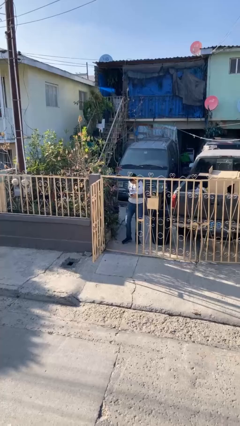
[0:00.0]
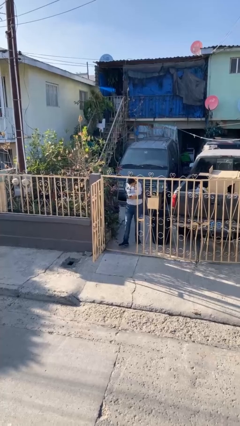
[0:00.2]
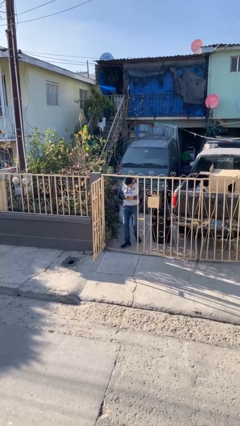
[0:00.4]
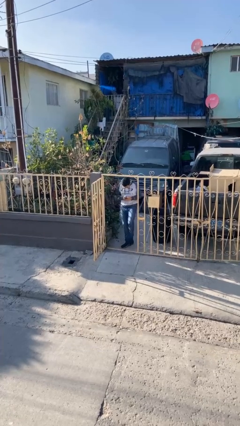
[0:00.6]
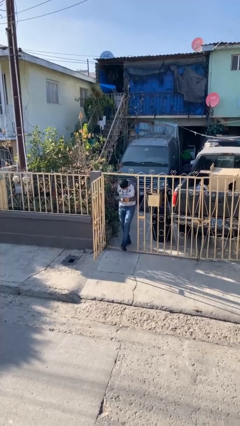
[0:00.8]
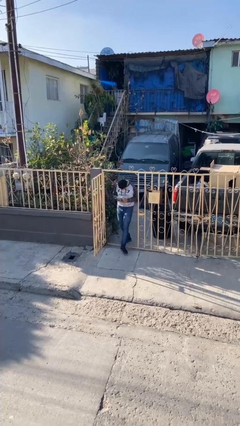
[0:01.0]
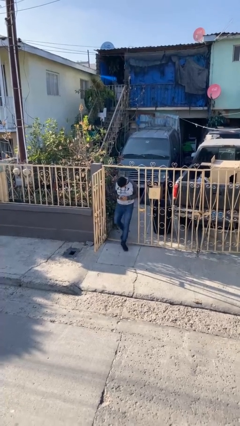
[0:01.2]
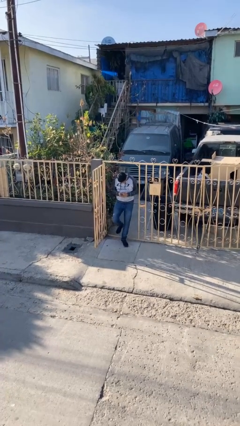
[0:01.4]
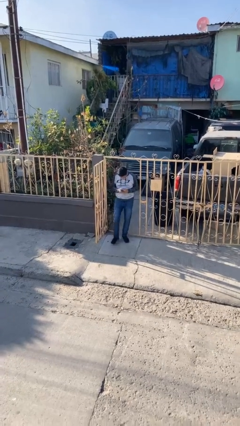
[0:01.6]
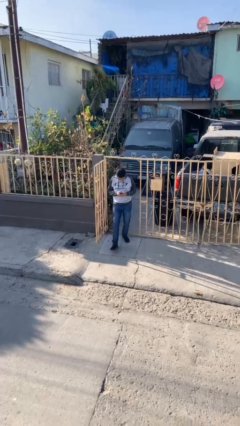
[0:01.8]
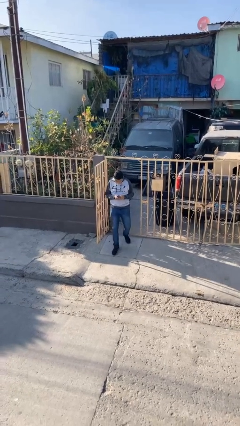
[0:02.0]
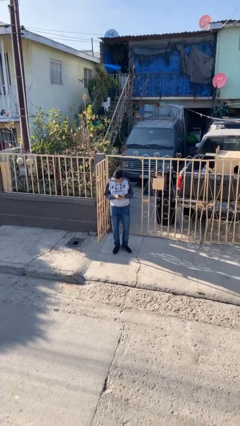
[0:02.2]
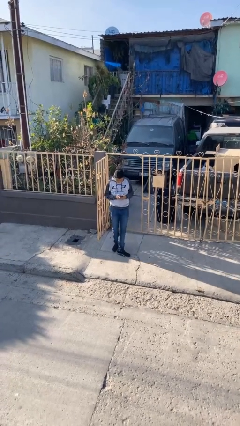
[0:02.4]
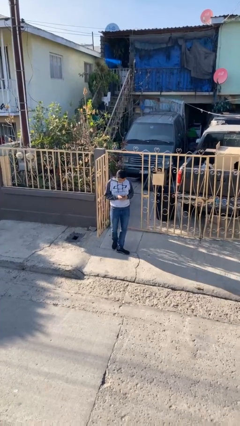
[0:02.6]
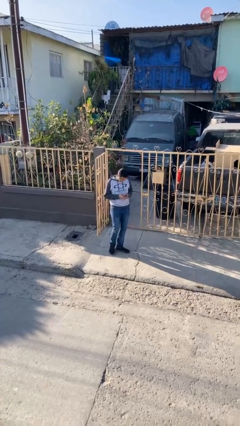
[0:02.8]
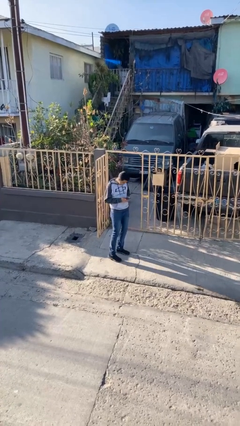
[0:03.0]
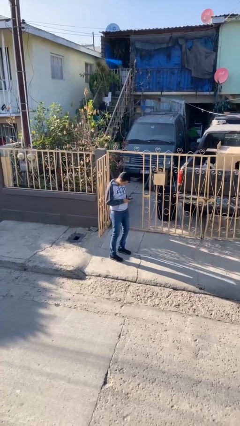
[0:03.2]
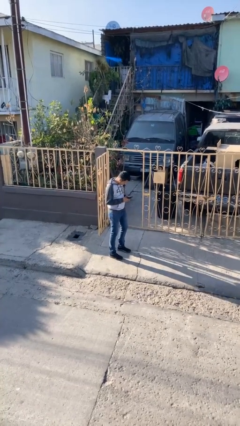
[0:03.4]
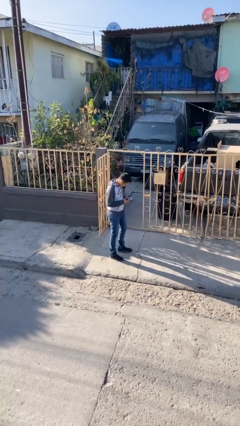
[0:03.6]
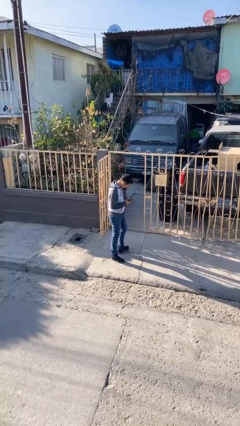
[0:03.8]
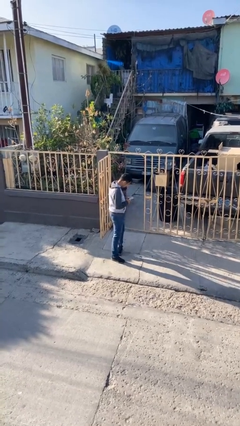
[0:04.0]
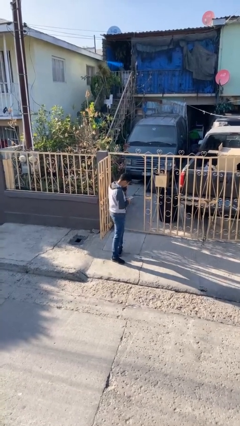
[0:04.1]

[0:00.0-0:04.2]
person enters scene through structure

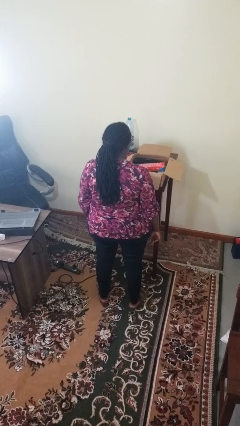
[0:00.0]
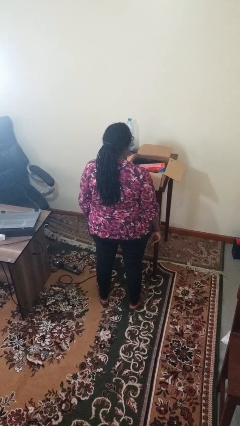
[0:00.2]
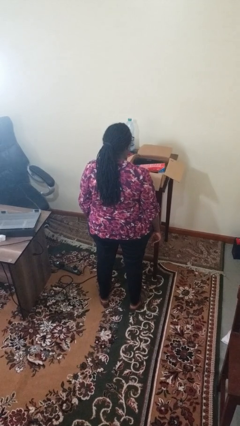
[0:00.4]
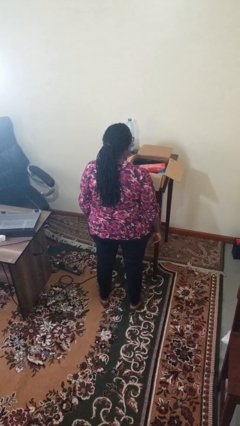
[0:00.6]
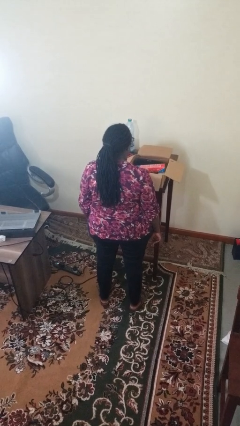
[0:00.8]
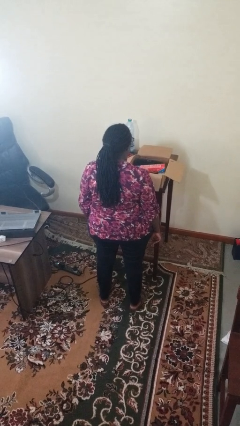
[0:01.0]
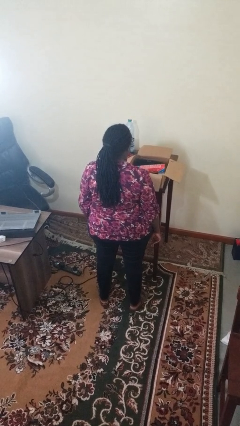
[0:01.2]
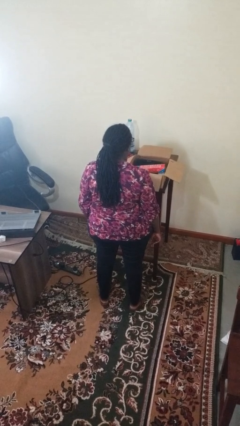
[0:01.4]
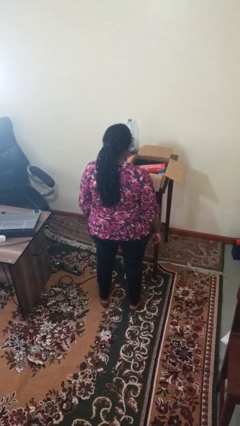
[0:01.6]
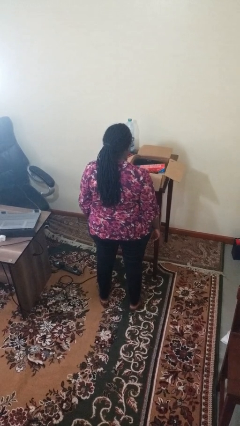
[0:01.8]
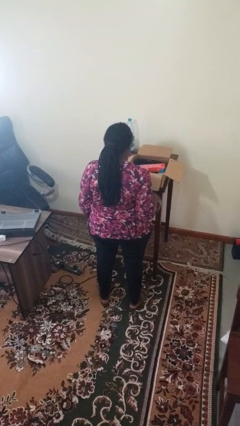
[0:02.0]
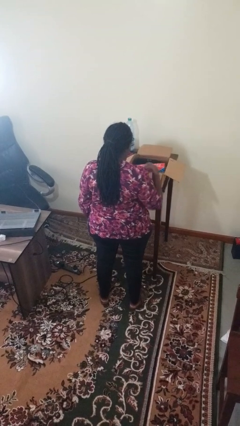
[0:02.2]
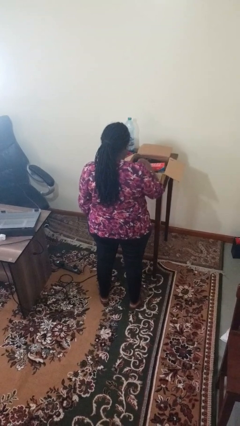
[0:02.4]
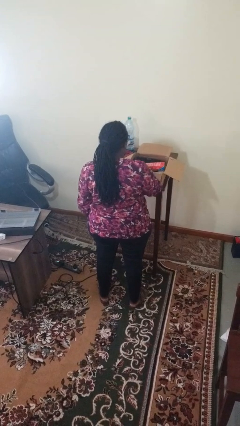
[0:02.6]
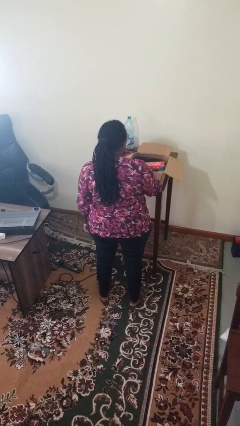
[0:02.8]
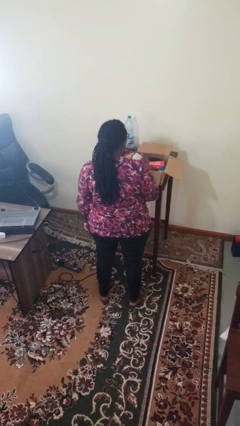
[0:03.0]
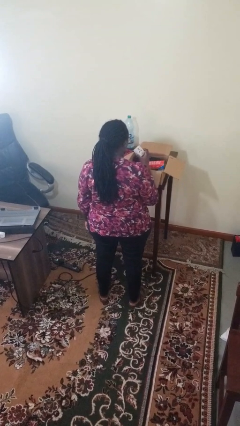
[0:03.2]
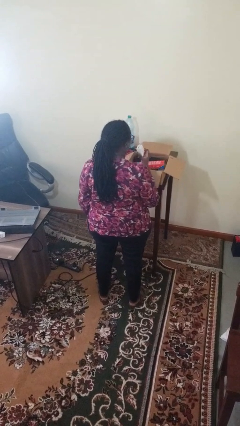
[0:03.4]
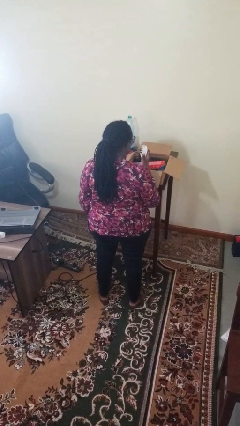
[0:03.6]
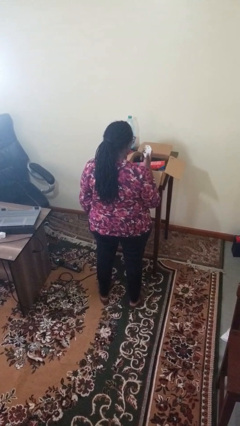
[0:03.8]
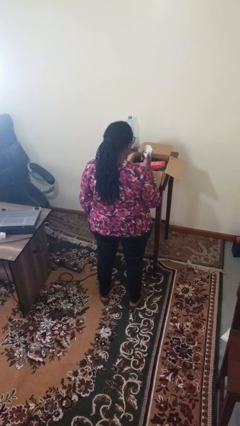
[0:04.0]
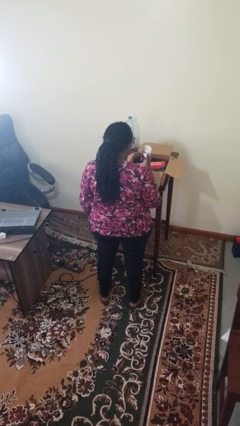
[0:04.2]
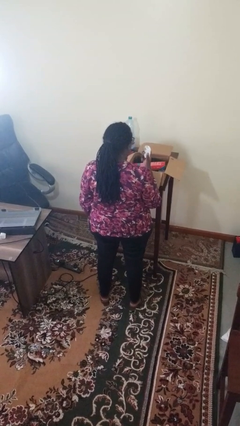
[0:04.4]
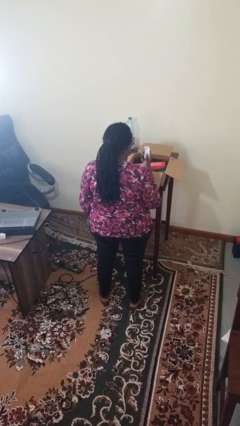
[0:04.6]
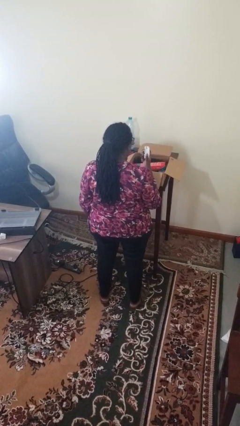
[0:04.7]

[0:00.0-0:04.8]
person takes object from box

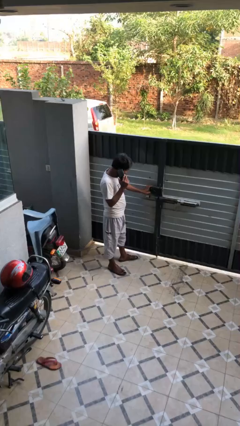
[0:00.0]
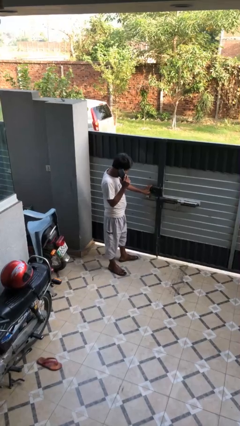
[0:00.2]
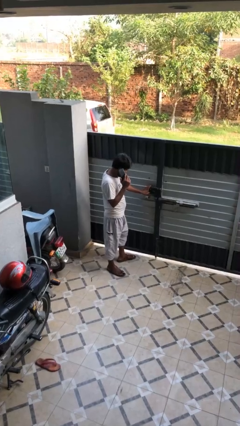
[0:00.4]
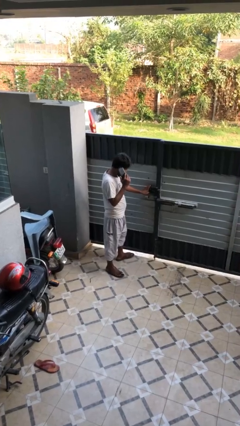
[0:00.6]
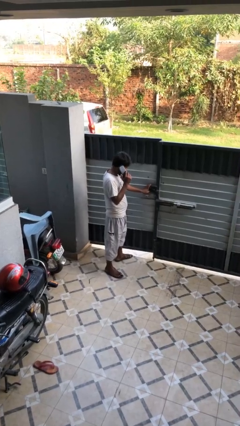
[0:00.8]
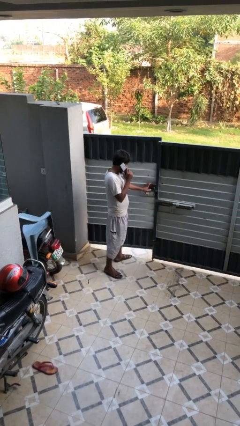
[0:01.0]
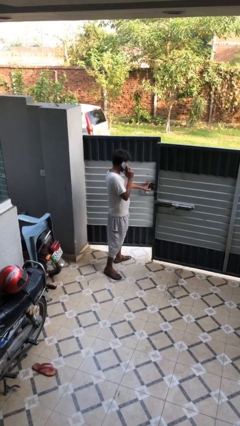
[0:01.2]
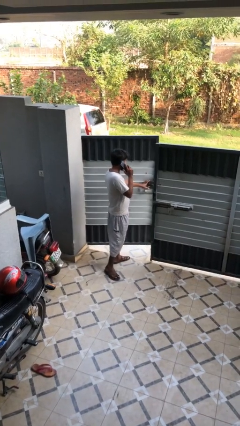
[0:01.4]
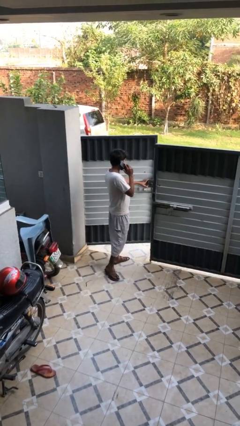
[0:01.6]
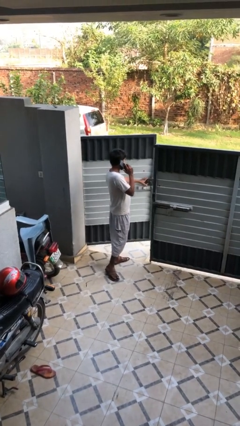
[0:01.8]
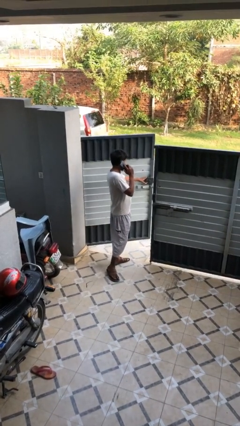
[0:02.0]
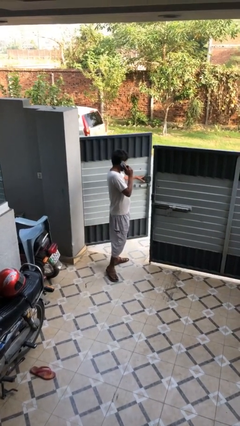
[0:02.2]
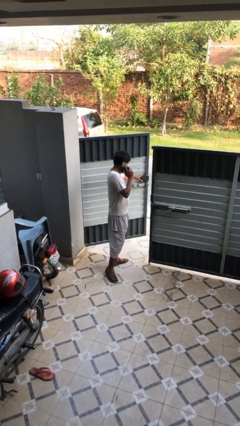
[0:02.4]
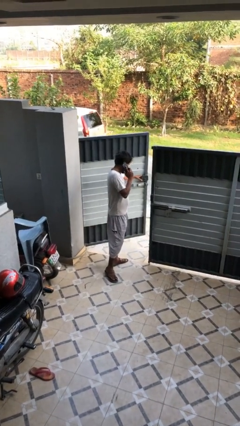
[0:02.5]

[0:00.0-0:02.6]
person opens facility door

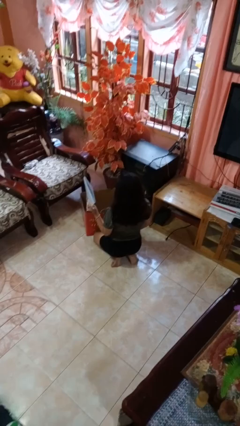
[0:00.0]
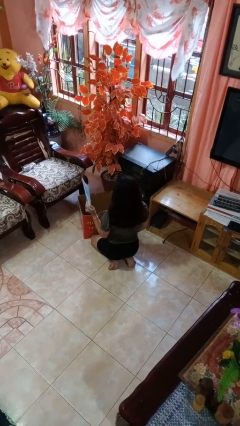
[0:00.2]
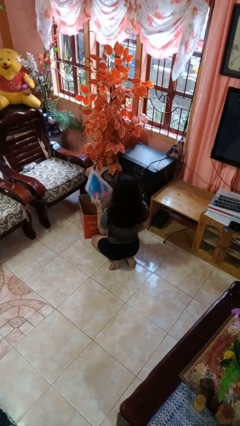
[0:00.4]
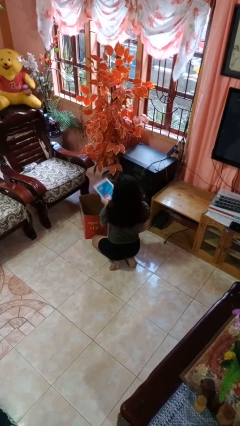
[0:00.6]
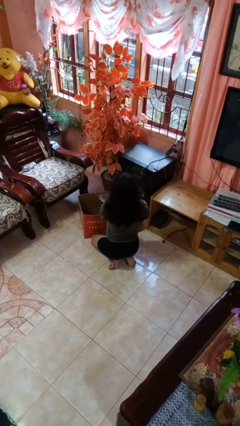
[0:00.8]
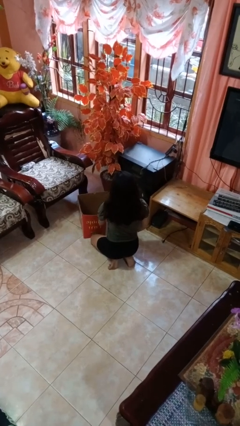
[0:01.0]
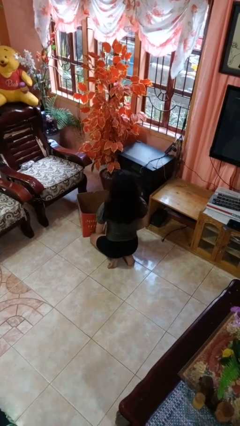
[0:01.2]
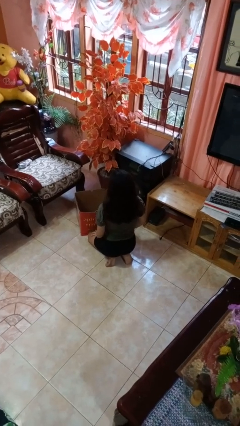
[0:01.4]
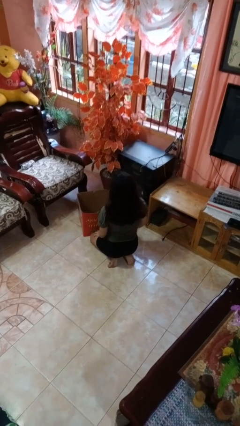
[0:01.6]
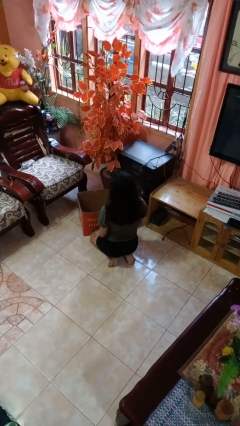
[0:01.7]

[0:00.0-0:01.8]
person puts object into box

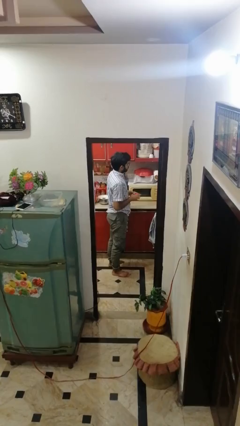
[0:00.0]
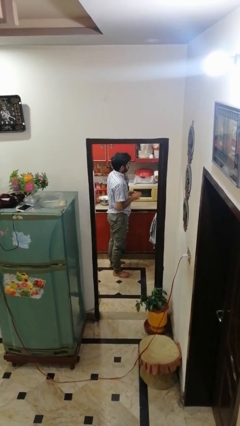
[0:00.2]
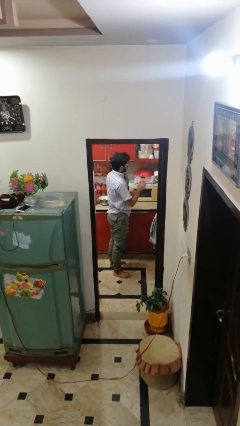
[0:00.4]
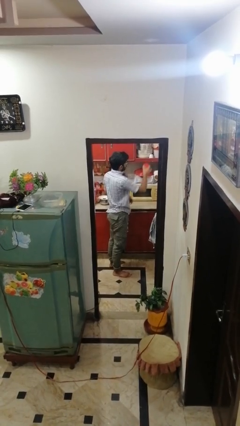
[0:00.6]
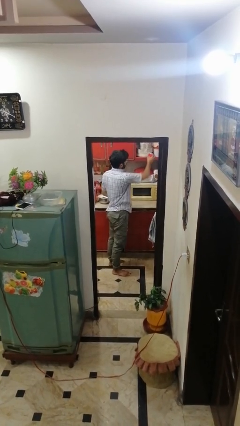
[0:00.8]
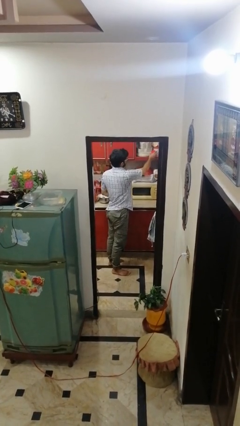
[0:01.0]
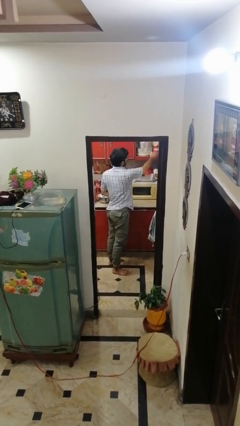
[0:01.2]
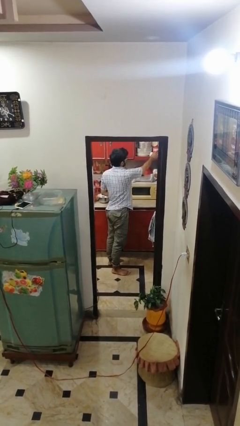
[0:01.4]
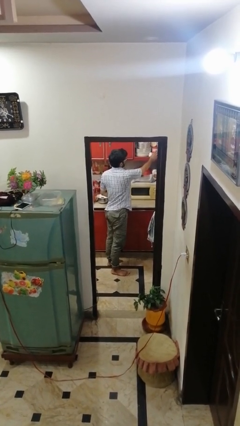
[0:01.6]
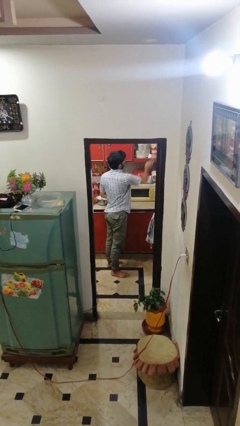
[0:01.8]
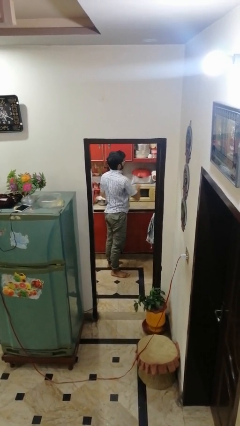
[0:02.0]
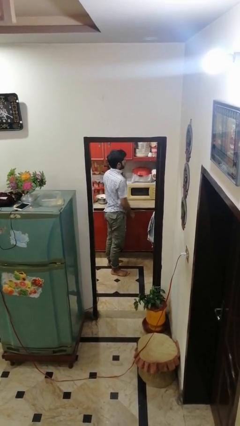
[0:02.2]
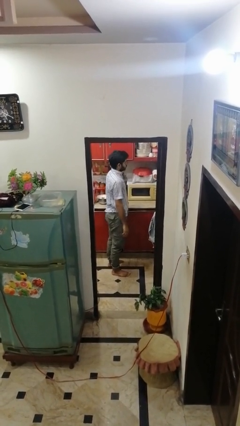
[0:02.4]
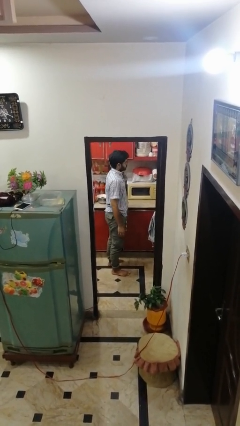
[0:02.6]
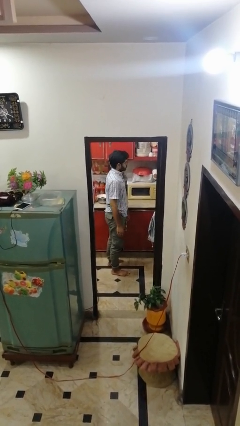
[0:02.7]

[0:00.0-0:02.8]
person puts down object into cabinet

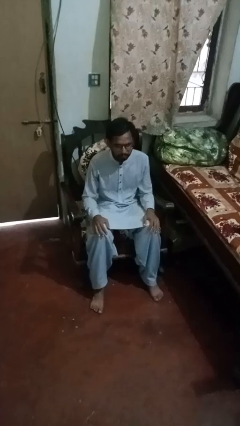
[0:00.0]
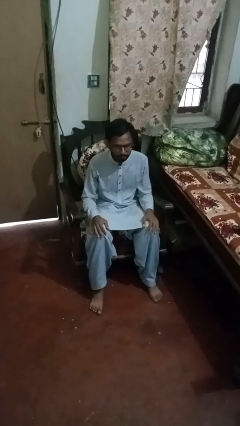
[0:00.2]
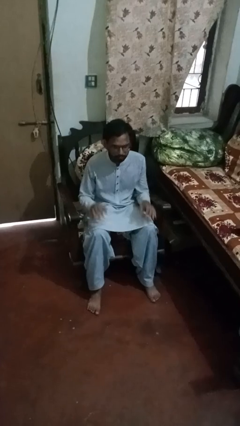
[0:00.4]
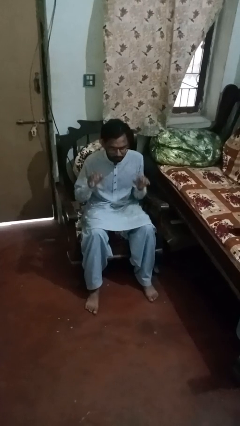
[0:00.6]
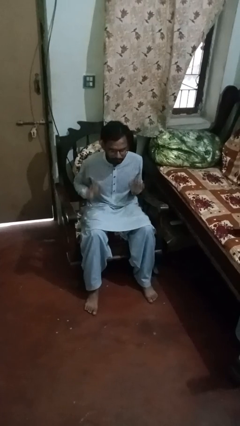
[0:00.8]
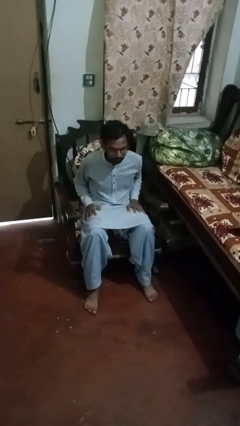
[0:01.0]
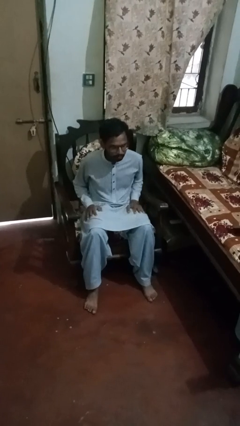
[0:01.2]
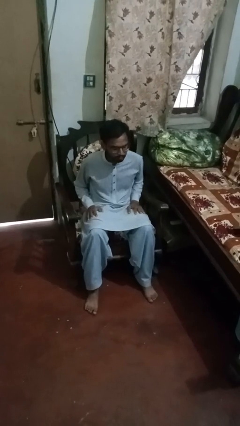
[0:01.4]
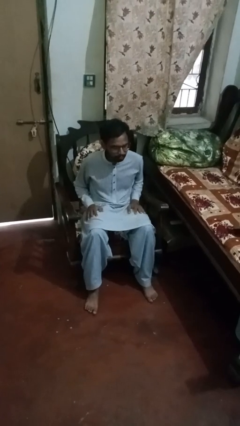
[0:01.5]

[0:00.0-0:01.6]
person slaps hands on thighs
